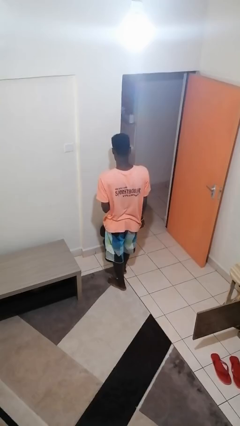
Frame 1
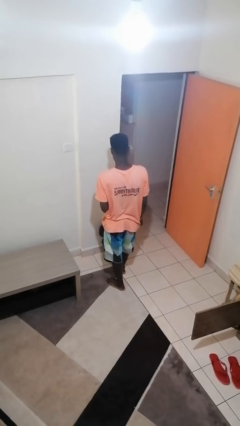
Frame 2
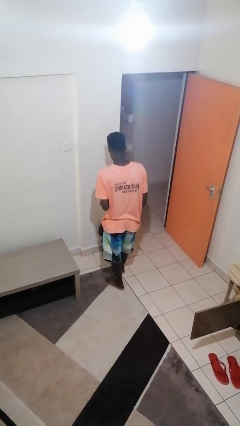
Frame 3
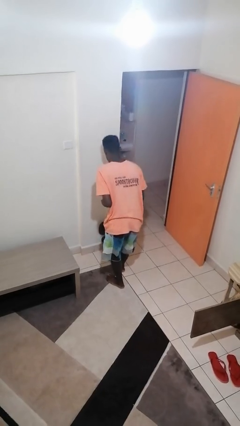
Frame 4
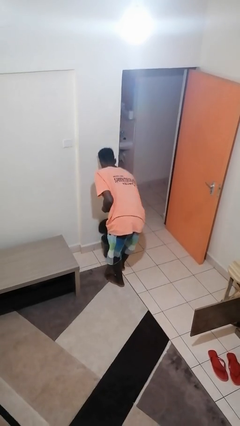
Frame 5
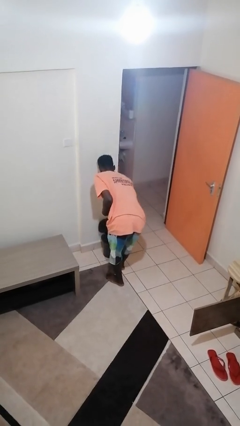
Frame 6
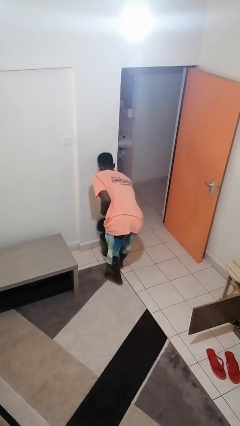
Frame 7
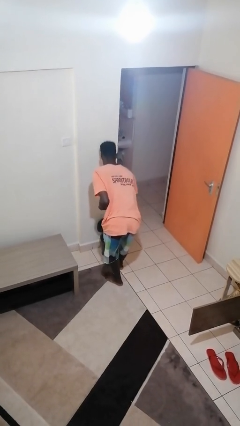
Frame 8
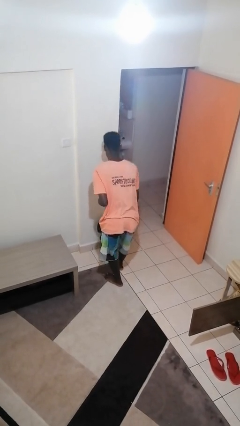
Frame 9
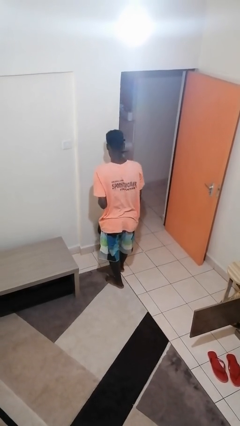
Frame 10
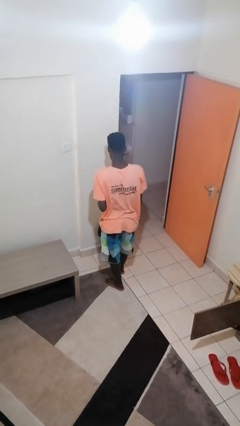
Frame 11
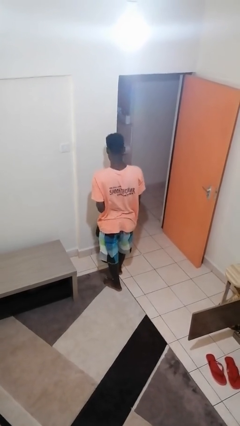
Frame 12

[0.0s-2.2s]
person discards trash

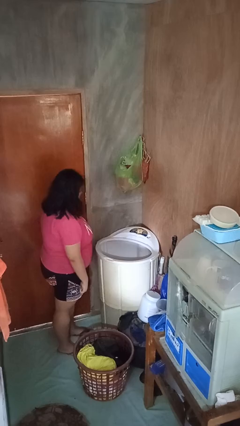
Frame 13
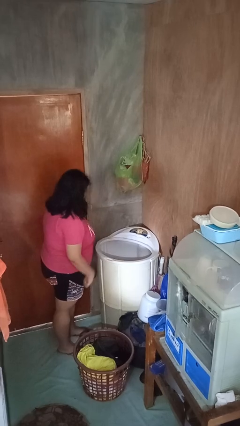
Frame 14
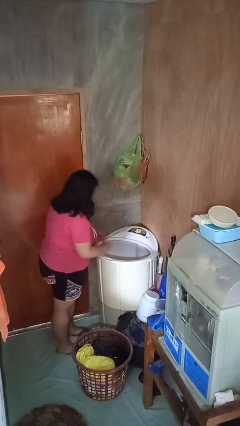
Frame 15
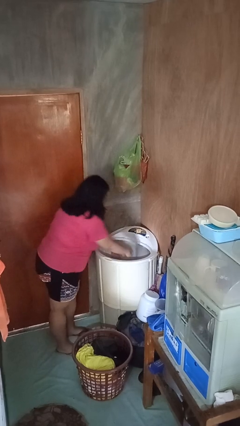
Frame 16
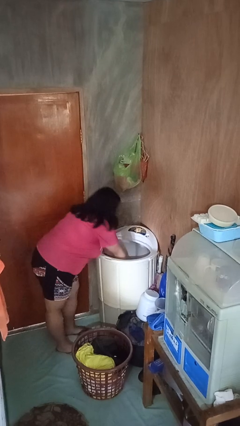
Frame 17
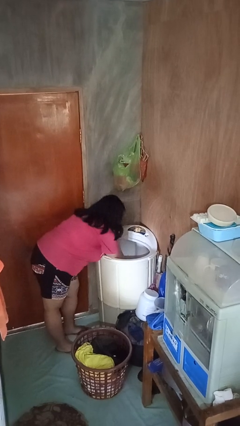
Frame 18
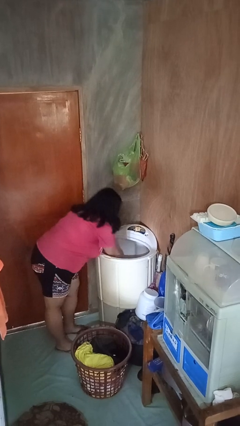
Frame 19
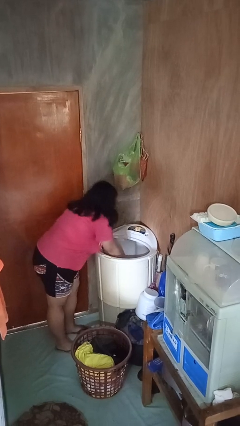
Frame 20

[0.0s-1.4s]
person unloads dryer

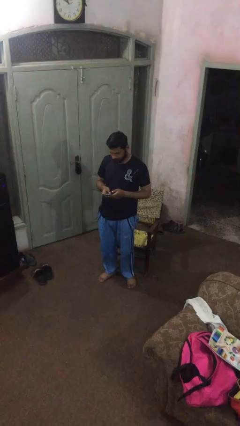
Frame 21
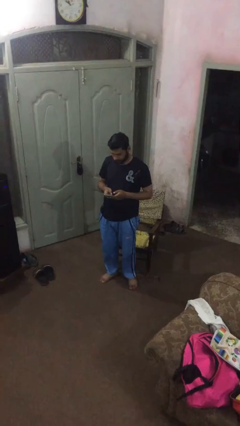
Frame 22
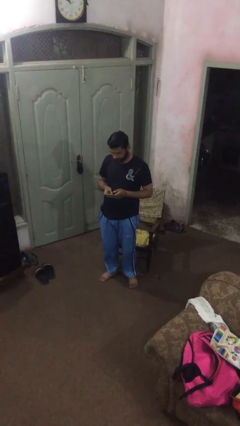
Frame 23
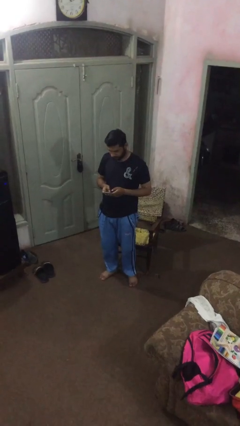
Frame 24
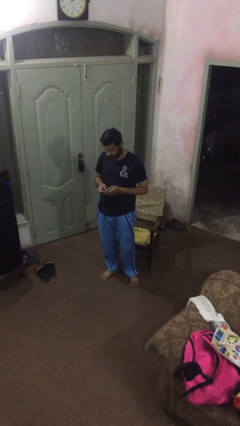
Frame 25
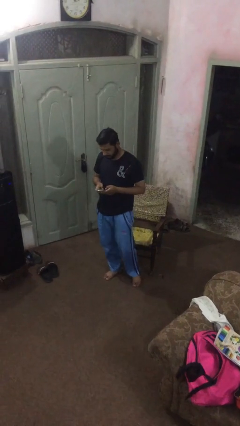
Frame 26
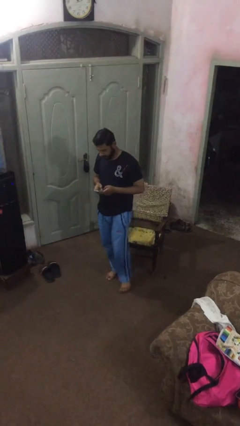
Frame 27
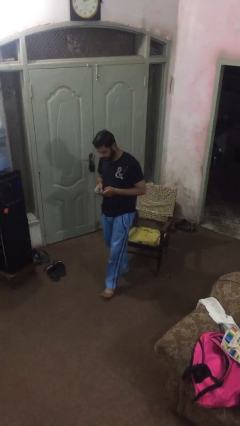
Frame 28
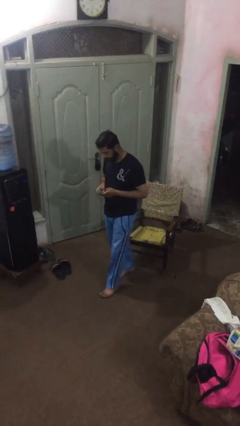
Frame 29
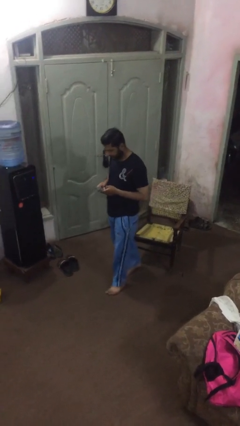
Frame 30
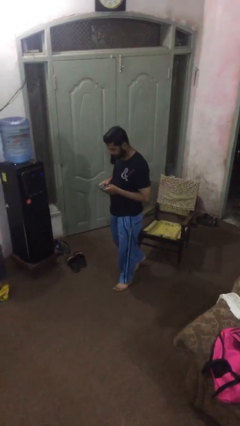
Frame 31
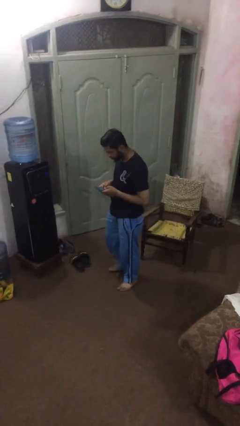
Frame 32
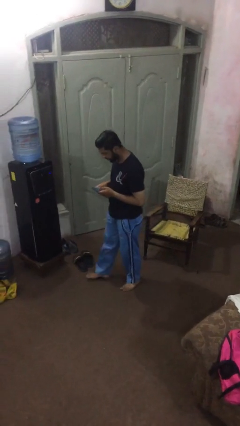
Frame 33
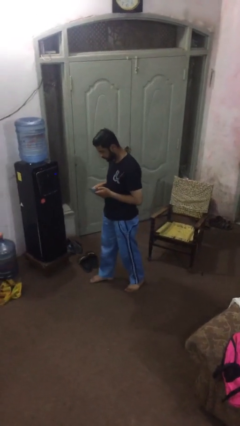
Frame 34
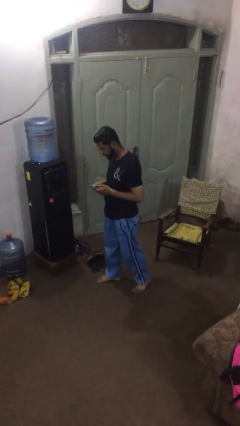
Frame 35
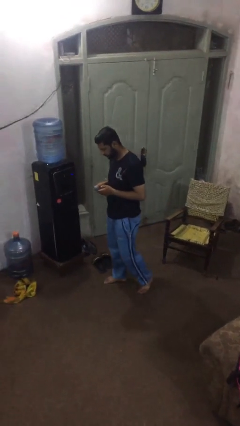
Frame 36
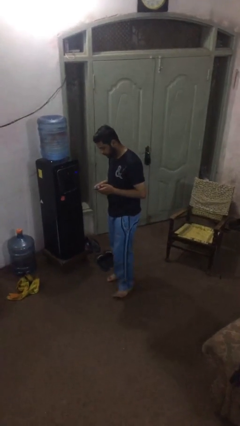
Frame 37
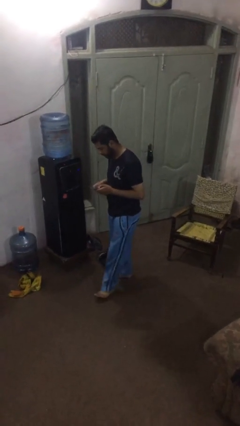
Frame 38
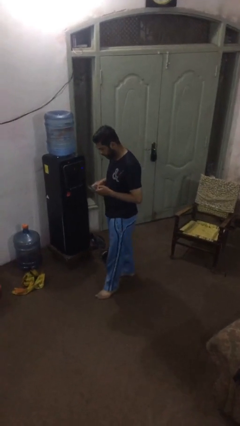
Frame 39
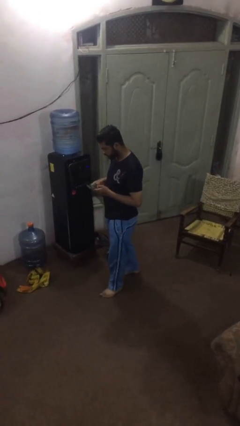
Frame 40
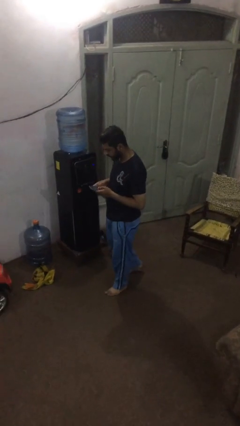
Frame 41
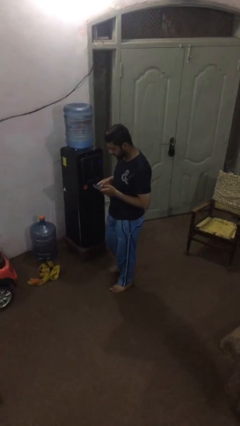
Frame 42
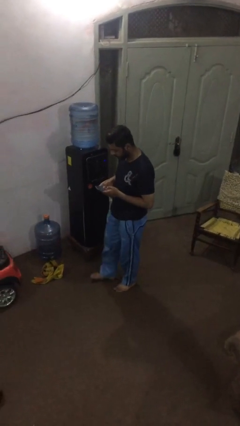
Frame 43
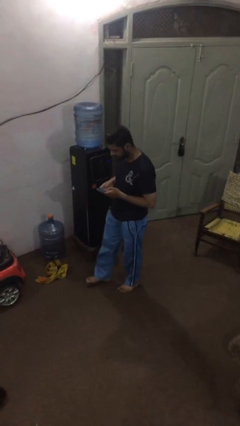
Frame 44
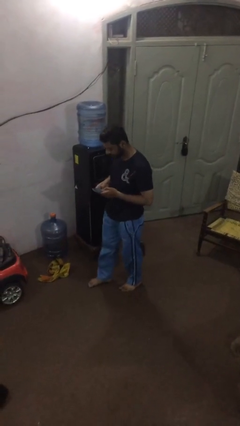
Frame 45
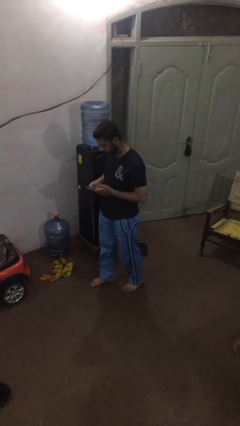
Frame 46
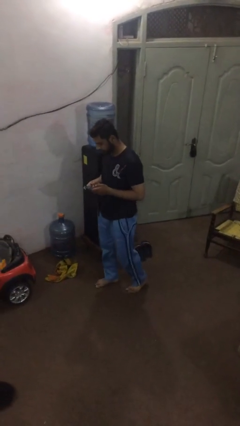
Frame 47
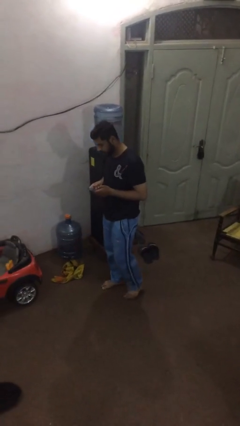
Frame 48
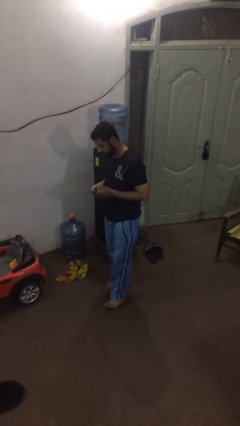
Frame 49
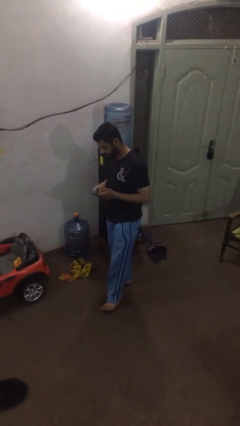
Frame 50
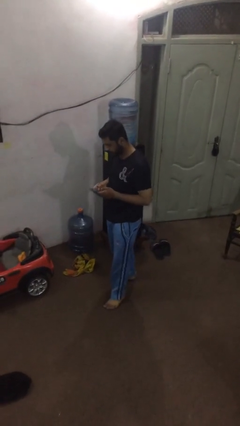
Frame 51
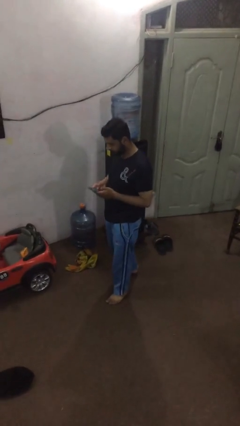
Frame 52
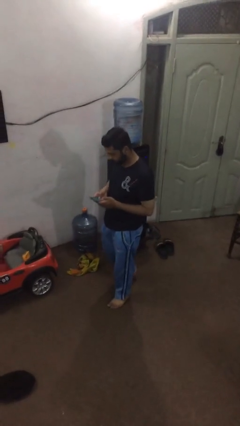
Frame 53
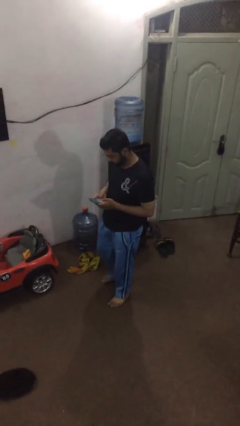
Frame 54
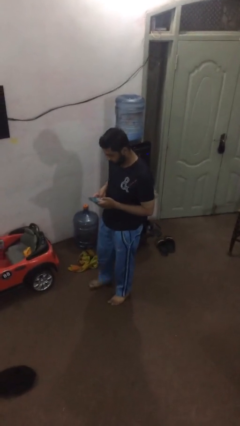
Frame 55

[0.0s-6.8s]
person texts on phone

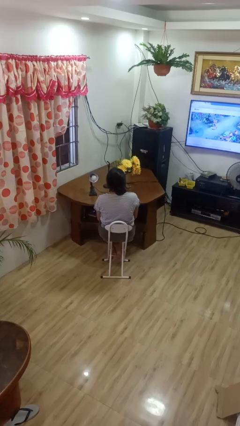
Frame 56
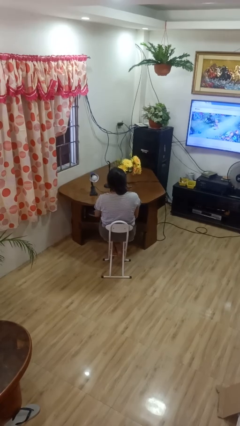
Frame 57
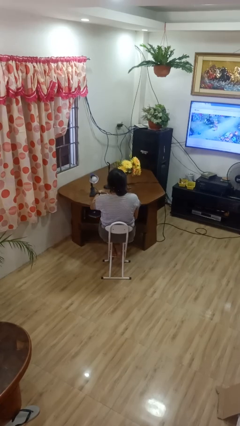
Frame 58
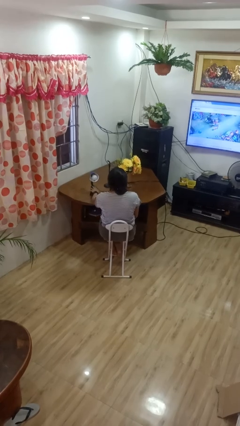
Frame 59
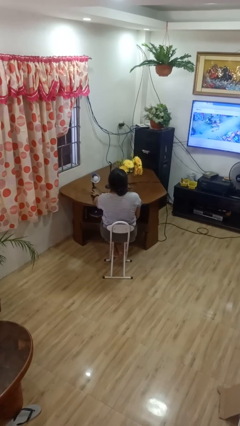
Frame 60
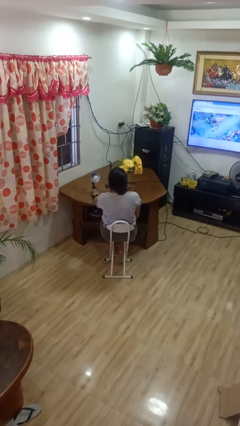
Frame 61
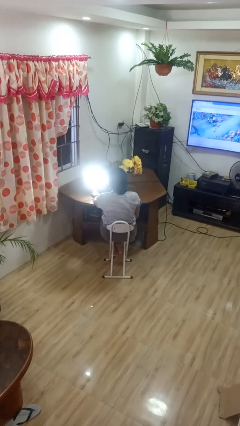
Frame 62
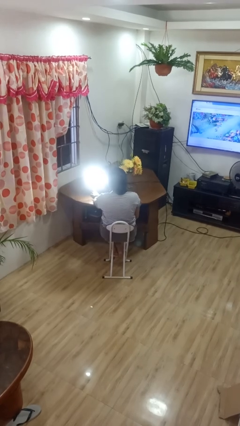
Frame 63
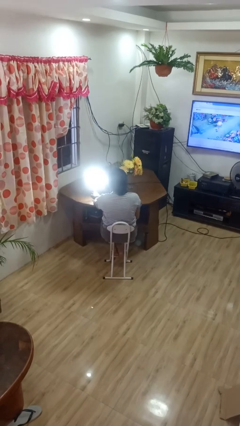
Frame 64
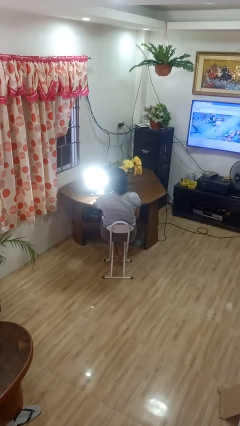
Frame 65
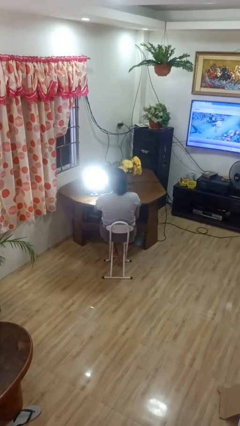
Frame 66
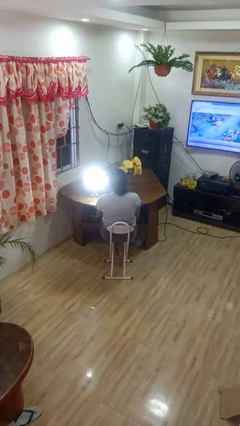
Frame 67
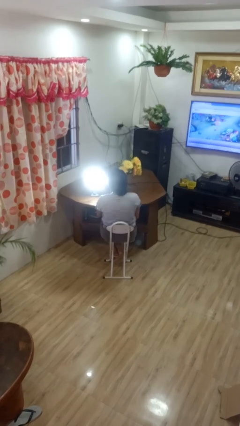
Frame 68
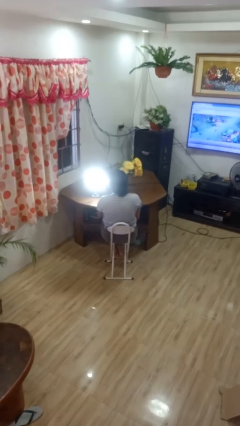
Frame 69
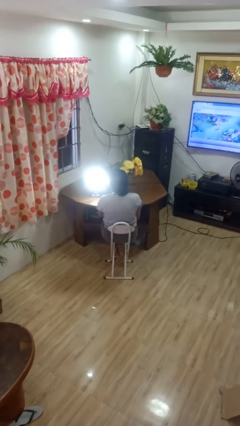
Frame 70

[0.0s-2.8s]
person turns on lamp

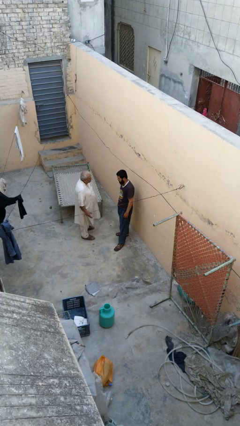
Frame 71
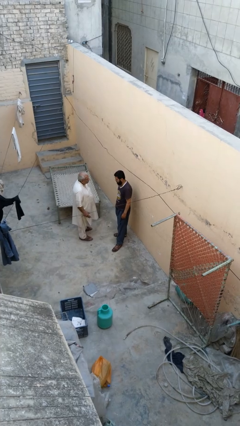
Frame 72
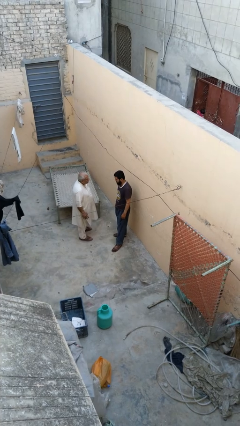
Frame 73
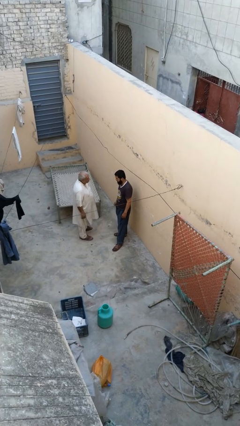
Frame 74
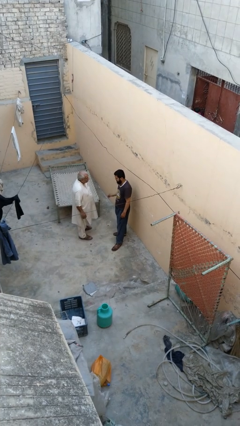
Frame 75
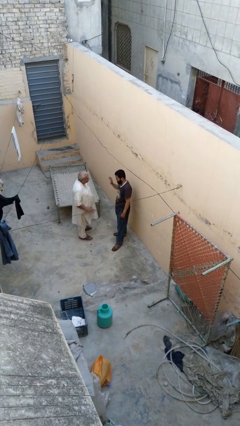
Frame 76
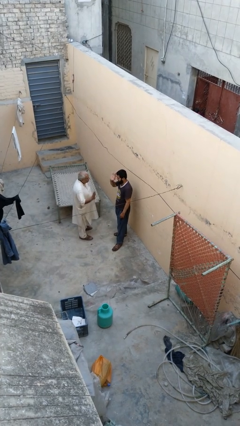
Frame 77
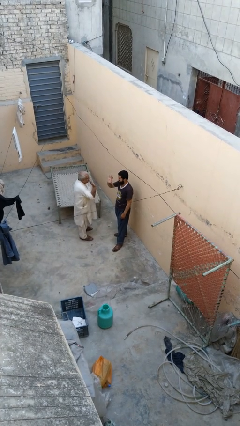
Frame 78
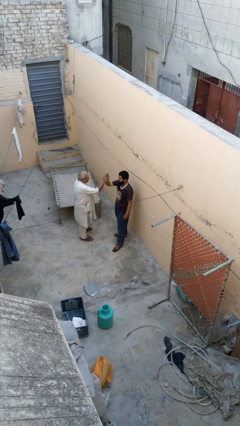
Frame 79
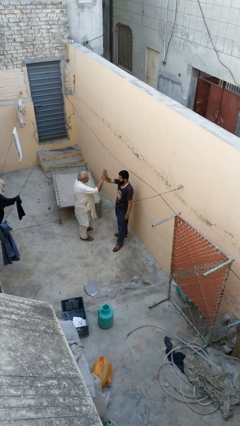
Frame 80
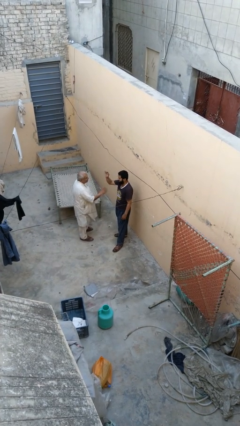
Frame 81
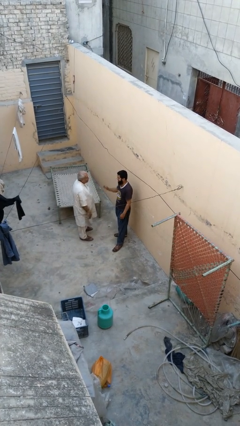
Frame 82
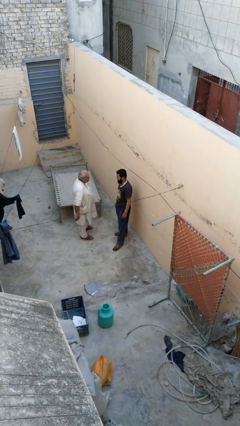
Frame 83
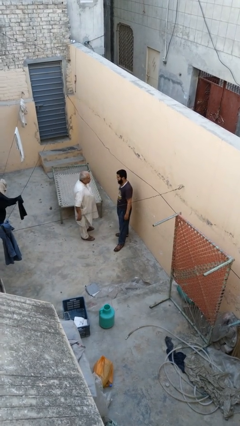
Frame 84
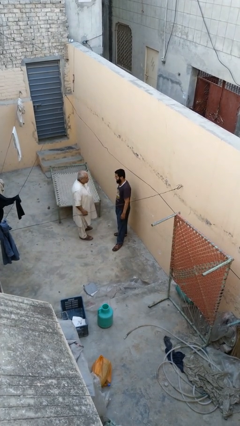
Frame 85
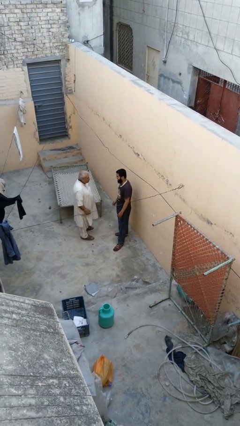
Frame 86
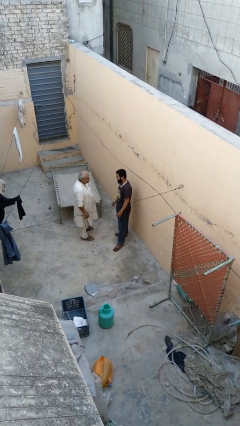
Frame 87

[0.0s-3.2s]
person highfives hand

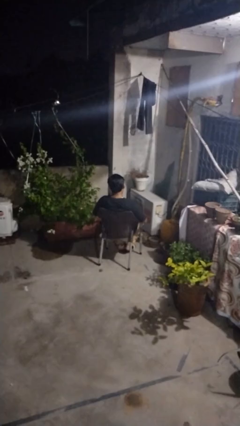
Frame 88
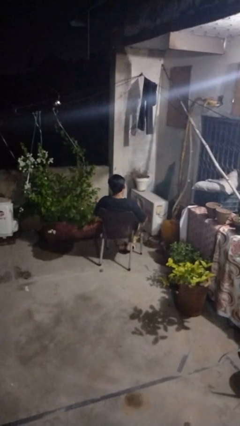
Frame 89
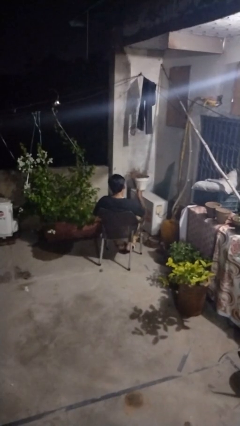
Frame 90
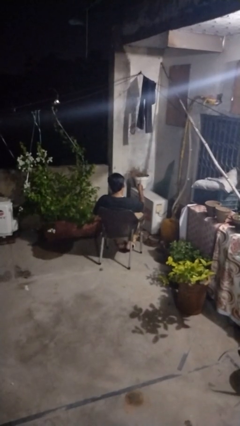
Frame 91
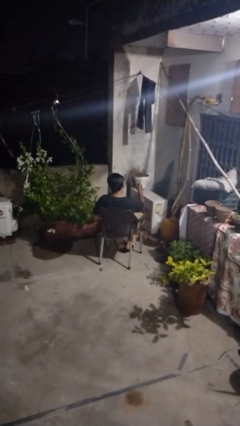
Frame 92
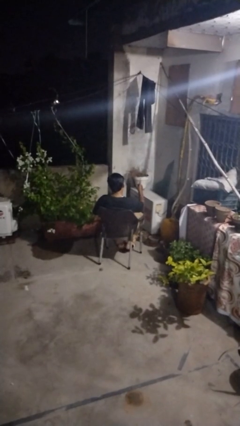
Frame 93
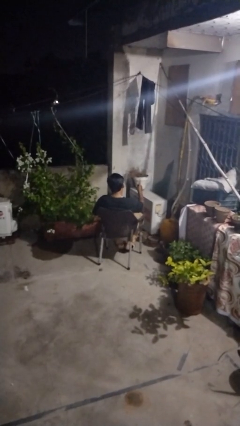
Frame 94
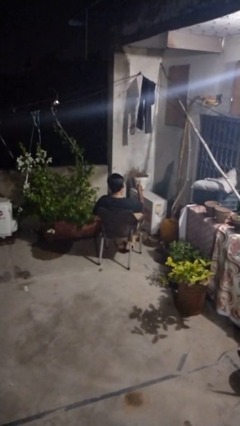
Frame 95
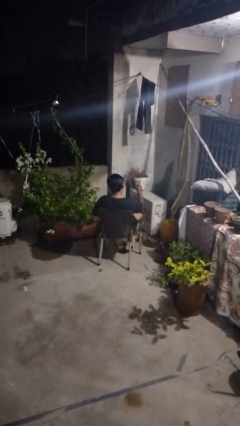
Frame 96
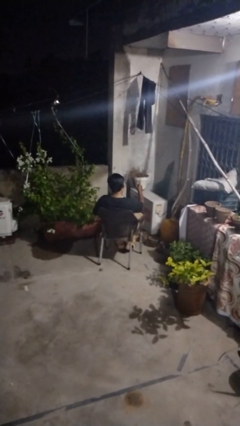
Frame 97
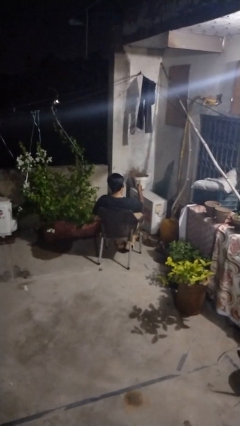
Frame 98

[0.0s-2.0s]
person gestures number one
